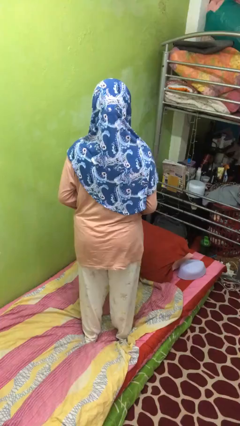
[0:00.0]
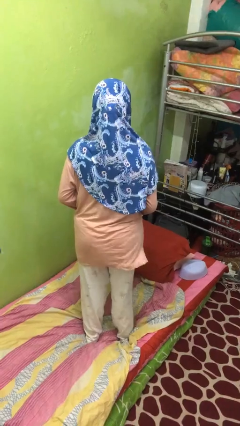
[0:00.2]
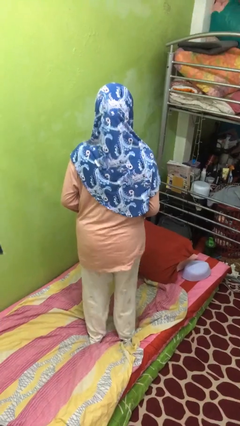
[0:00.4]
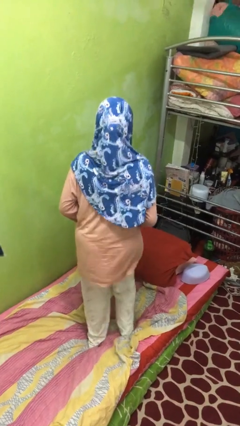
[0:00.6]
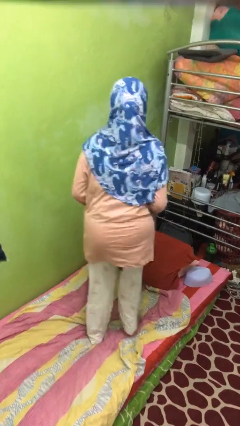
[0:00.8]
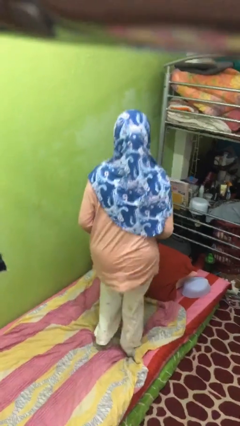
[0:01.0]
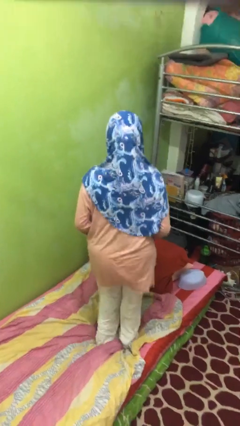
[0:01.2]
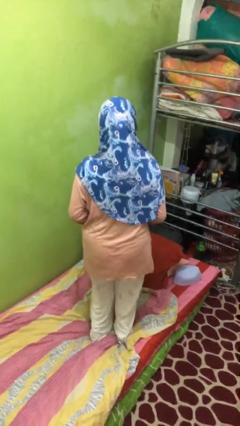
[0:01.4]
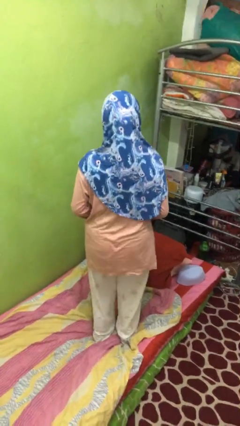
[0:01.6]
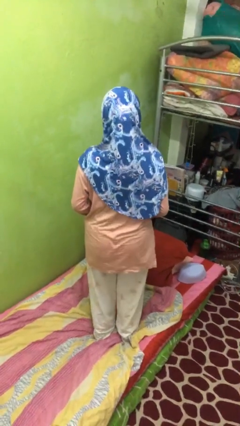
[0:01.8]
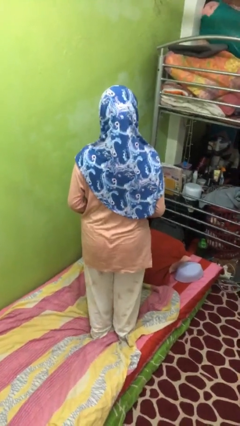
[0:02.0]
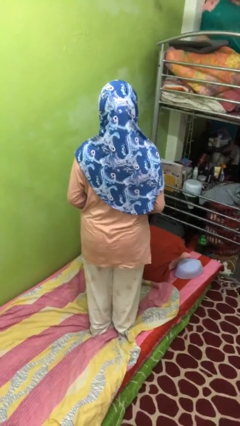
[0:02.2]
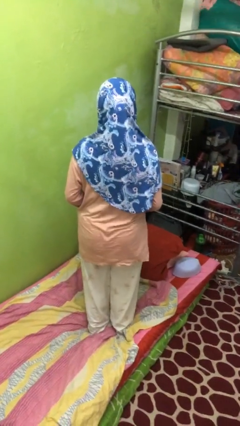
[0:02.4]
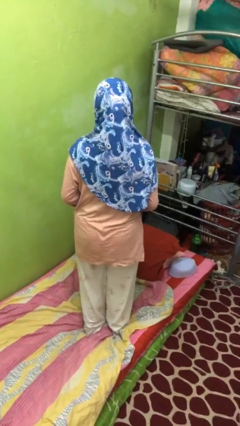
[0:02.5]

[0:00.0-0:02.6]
person jumps on bed

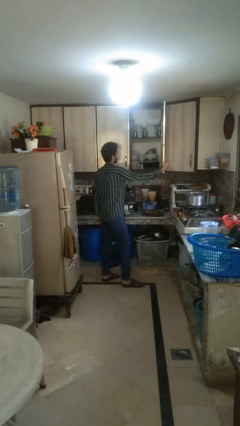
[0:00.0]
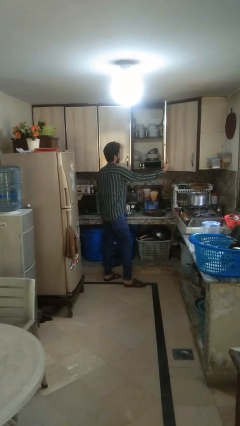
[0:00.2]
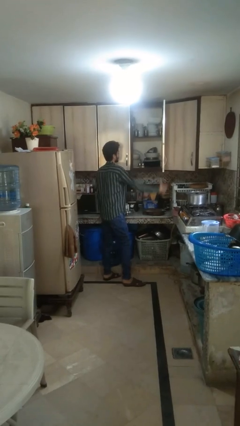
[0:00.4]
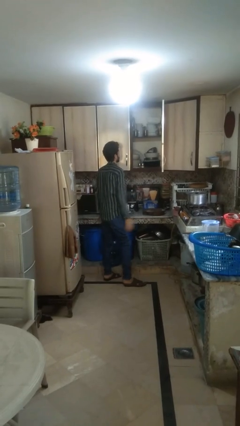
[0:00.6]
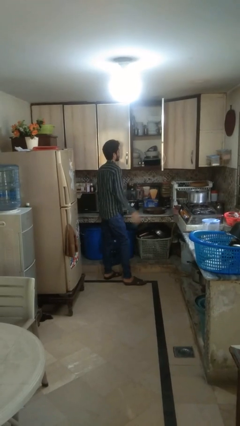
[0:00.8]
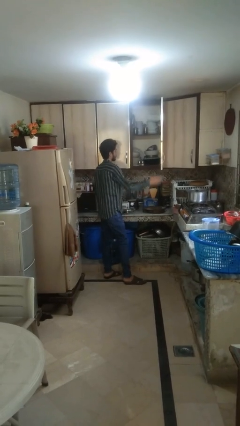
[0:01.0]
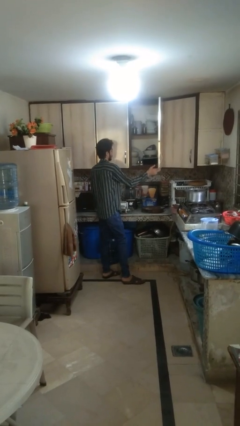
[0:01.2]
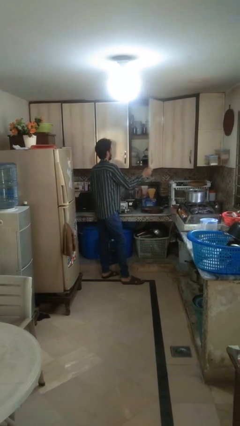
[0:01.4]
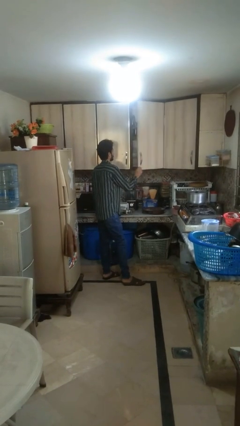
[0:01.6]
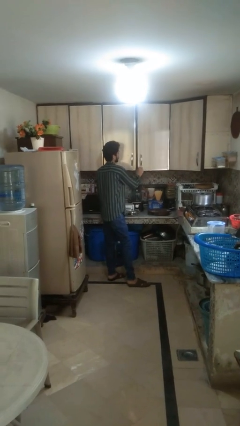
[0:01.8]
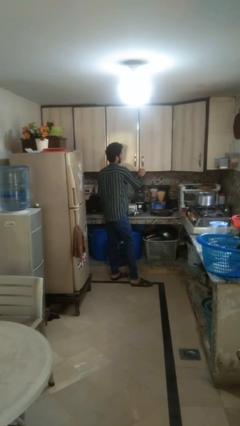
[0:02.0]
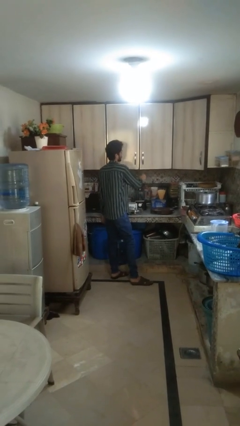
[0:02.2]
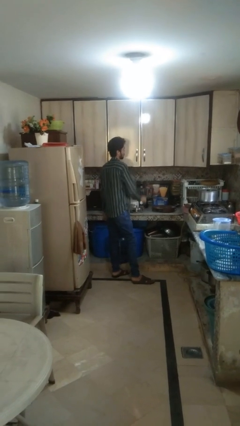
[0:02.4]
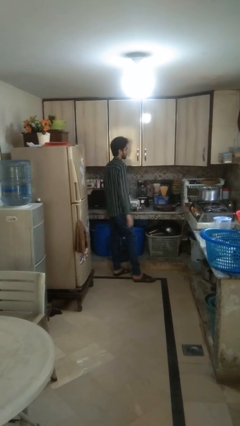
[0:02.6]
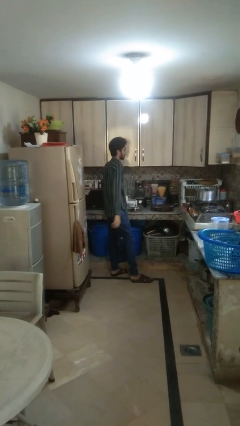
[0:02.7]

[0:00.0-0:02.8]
person closes cabinet

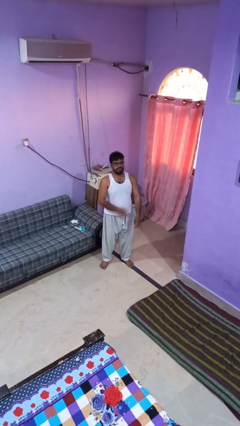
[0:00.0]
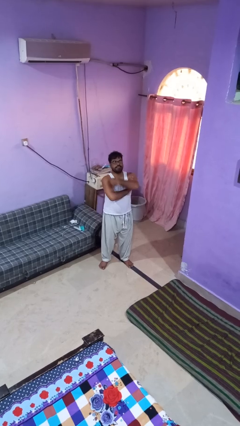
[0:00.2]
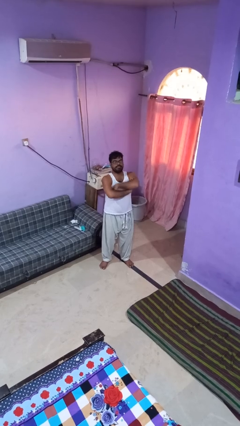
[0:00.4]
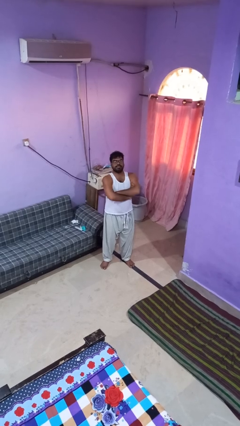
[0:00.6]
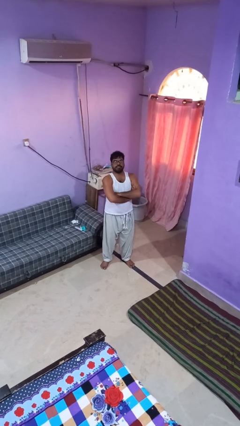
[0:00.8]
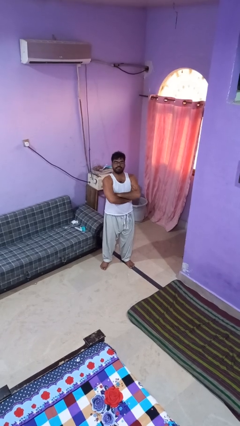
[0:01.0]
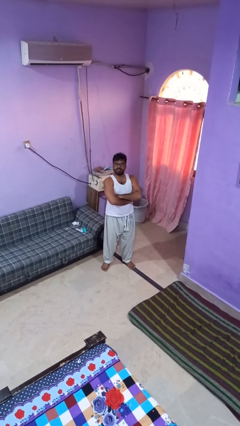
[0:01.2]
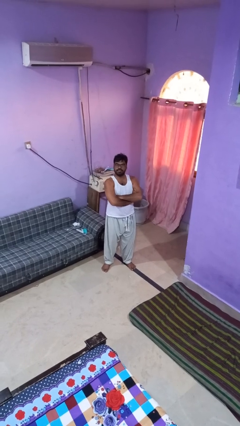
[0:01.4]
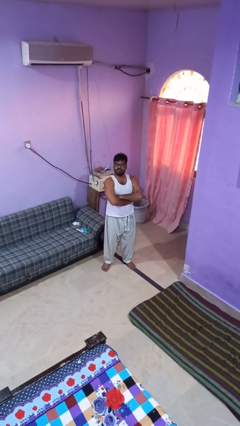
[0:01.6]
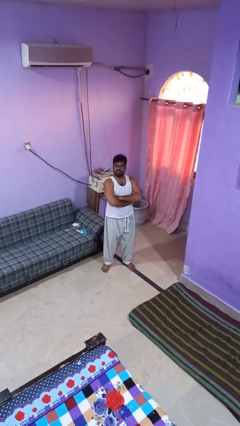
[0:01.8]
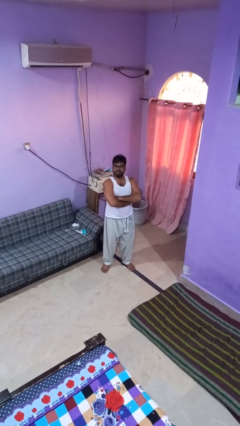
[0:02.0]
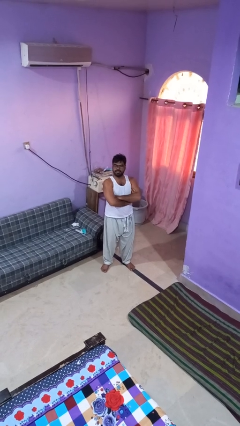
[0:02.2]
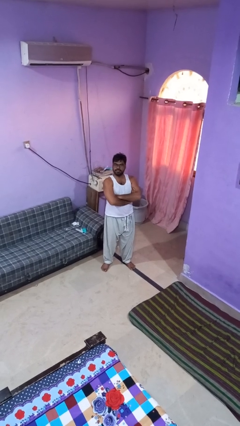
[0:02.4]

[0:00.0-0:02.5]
person crosses arms

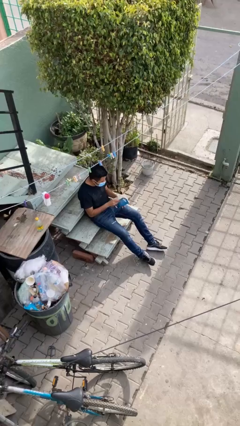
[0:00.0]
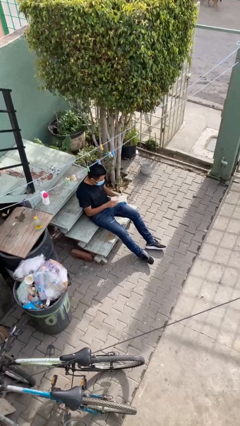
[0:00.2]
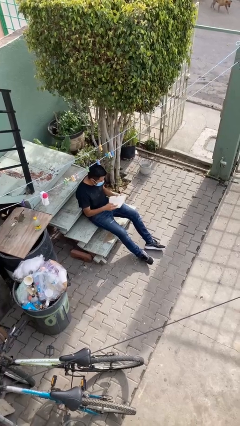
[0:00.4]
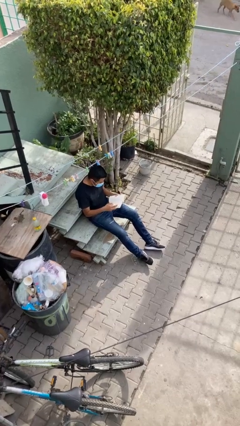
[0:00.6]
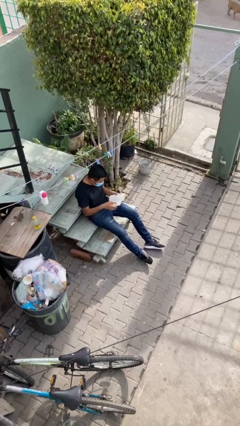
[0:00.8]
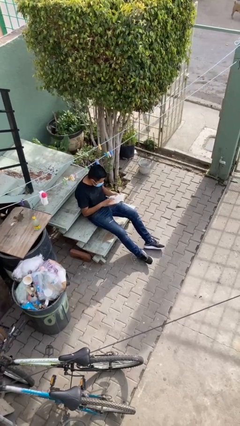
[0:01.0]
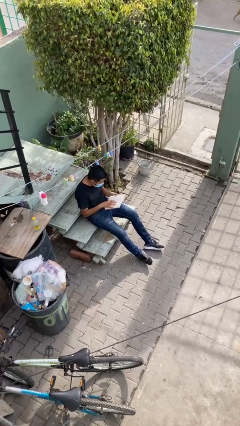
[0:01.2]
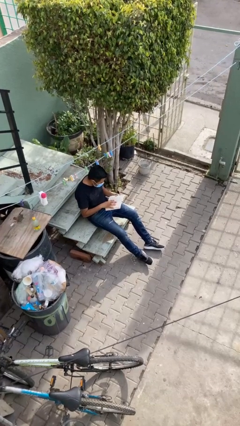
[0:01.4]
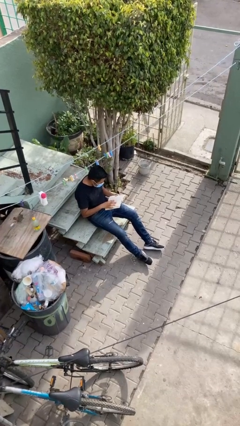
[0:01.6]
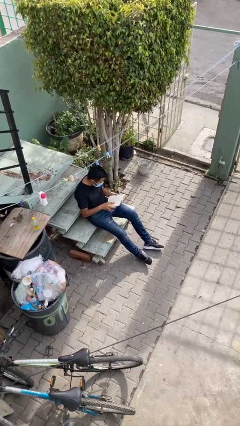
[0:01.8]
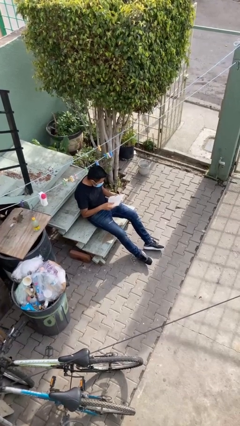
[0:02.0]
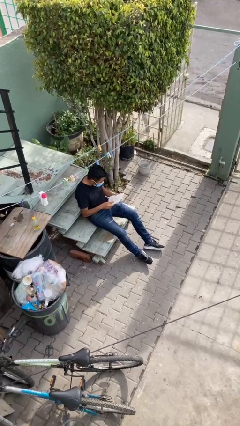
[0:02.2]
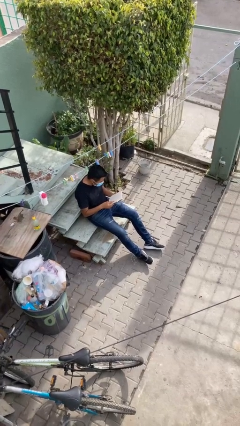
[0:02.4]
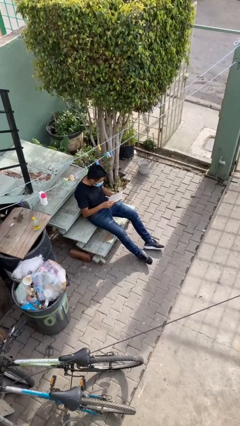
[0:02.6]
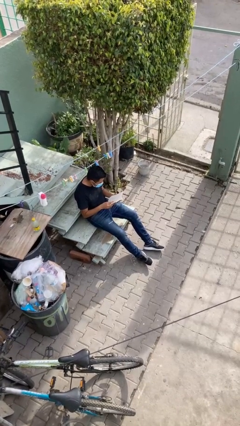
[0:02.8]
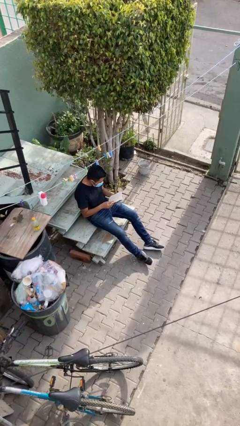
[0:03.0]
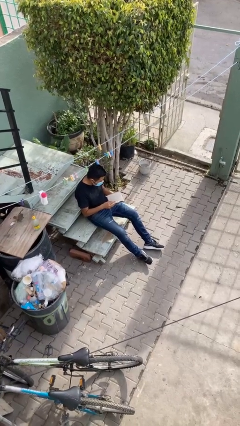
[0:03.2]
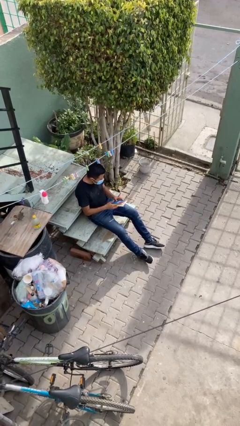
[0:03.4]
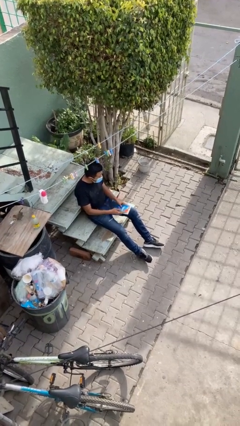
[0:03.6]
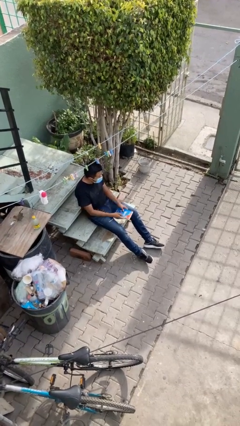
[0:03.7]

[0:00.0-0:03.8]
person reads document

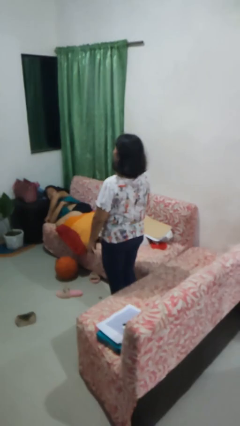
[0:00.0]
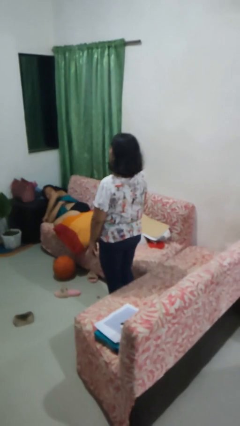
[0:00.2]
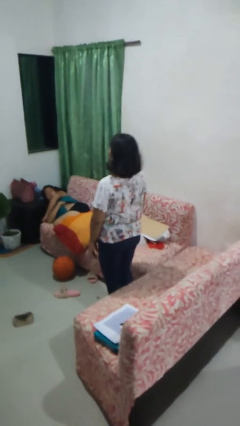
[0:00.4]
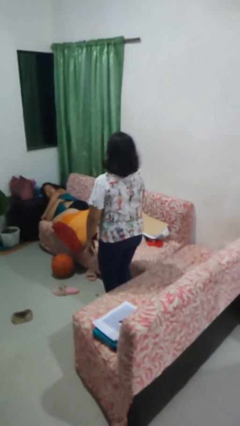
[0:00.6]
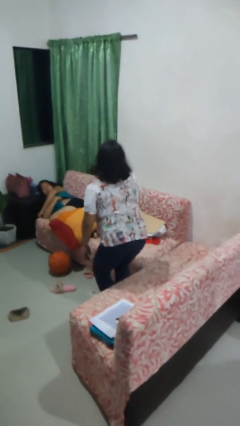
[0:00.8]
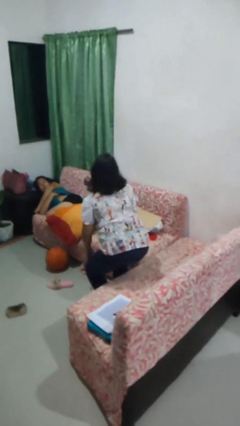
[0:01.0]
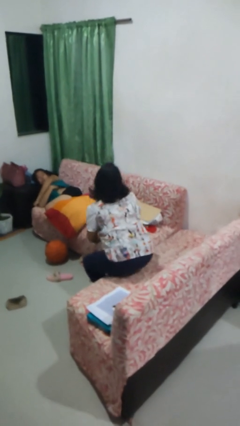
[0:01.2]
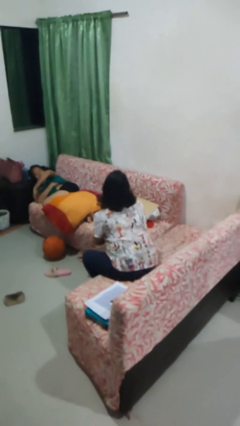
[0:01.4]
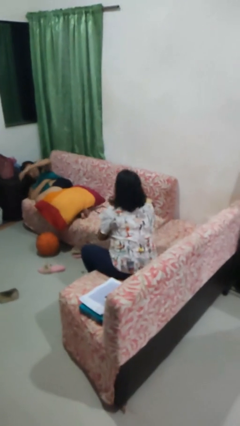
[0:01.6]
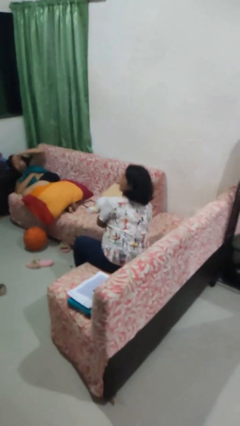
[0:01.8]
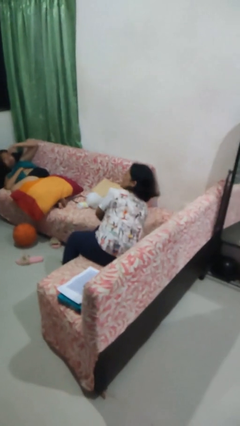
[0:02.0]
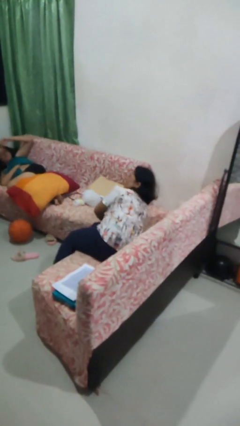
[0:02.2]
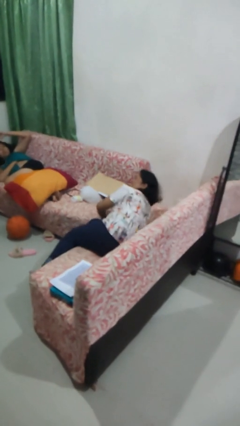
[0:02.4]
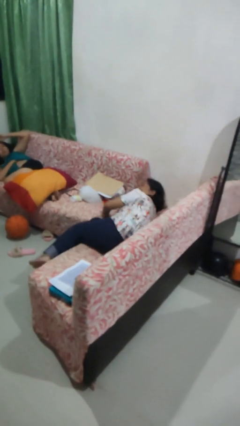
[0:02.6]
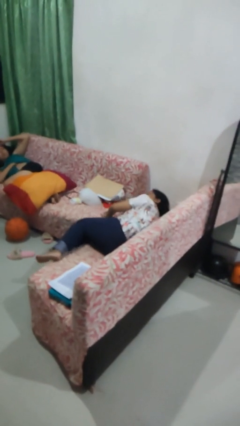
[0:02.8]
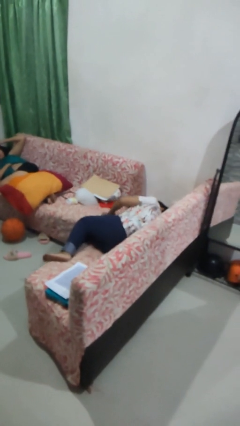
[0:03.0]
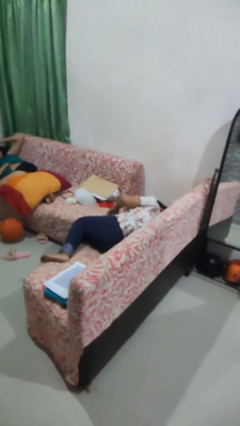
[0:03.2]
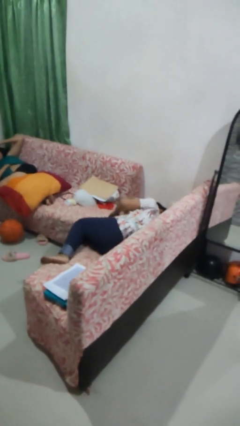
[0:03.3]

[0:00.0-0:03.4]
person lies down on couch

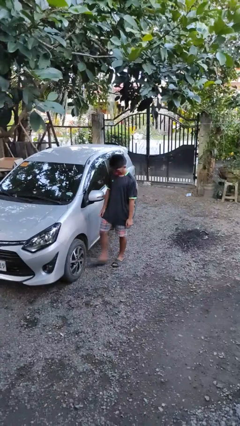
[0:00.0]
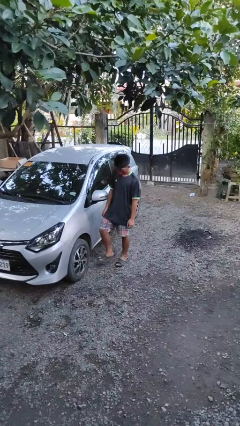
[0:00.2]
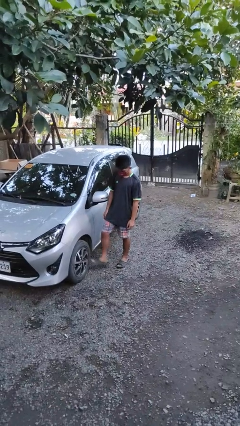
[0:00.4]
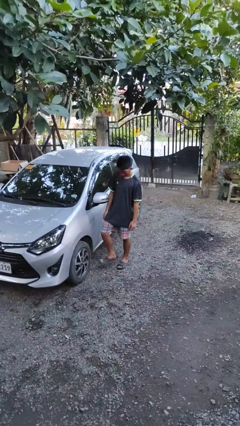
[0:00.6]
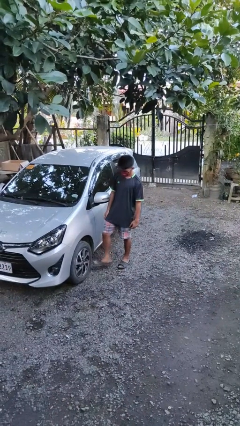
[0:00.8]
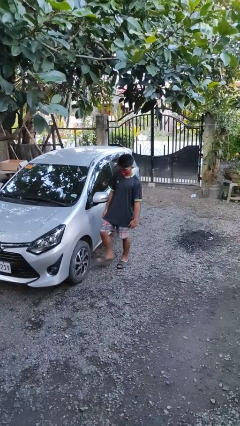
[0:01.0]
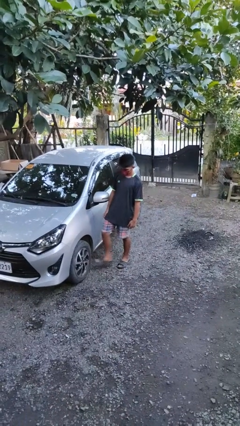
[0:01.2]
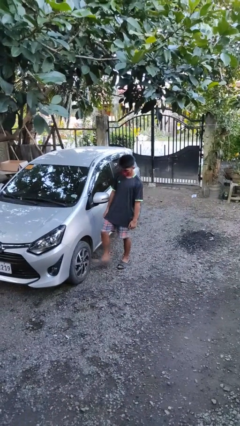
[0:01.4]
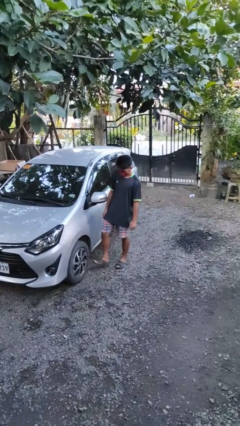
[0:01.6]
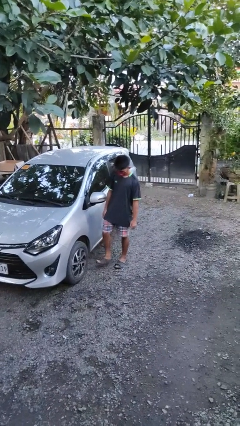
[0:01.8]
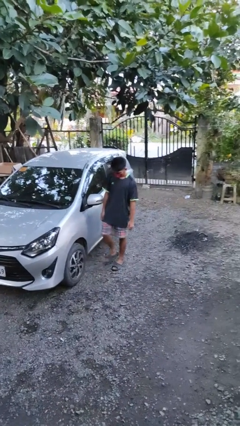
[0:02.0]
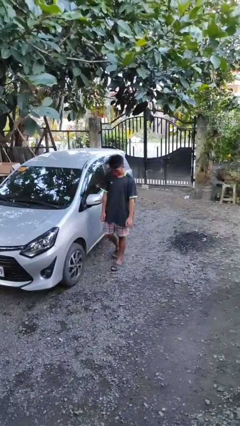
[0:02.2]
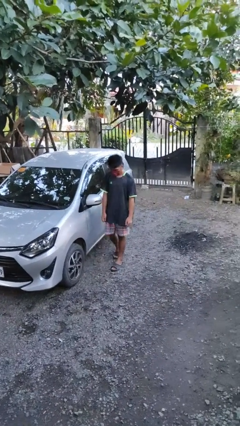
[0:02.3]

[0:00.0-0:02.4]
person kicks car tires
